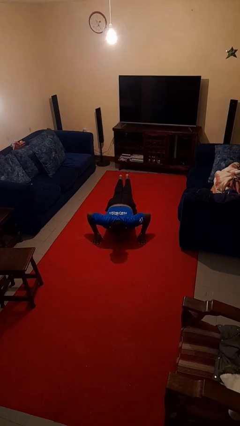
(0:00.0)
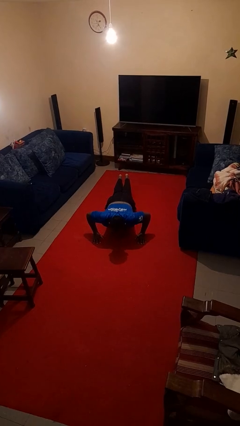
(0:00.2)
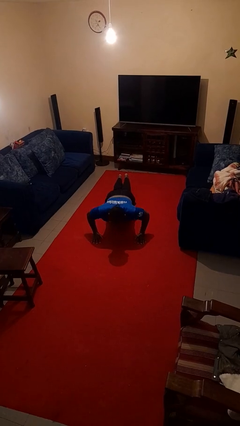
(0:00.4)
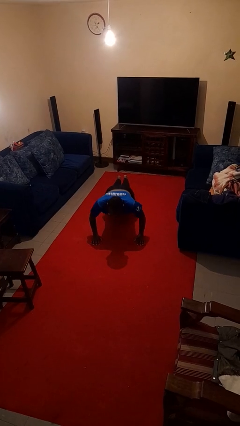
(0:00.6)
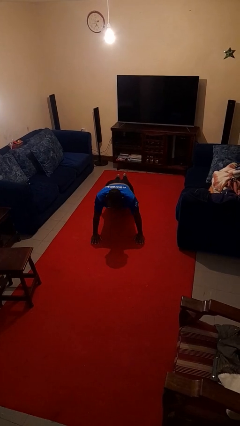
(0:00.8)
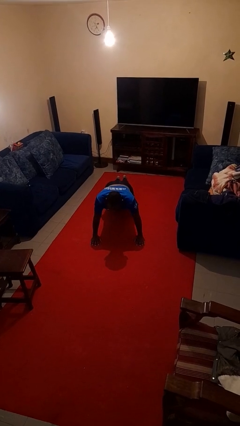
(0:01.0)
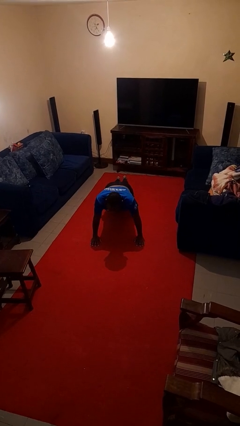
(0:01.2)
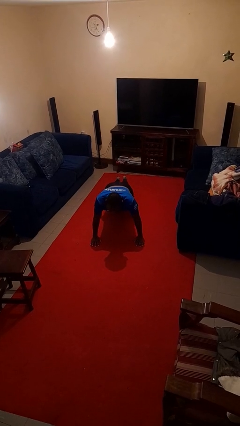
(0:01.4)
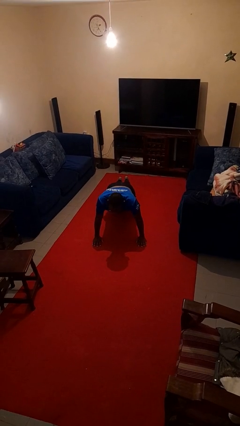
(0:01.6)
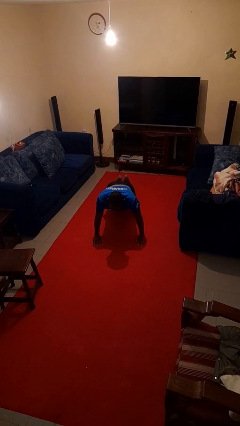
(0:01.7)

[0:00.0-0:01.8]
person exercises with pushup

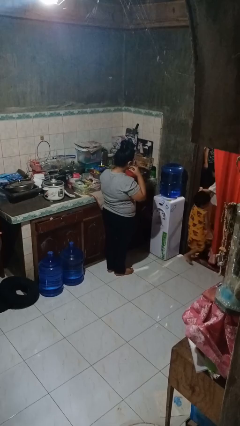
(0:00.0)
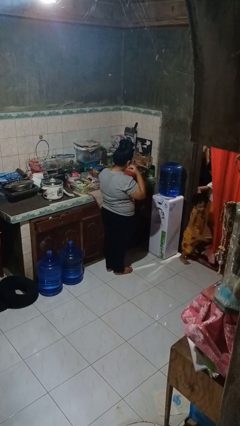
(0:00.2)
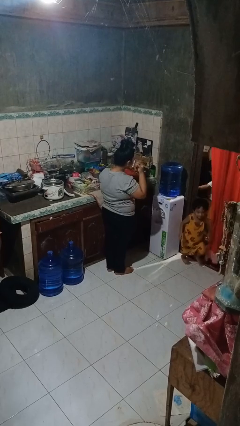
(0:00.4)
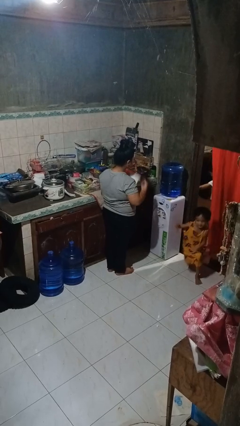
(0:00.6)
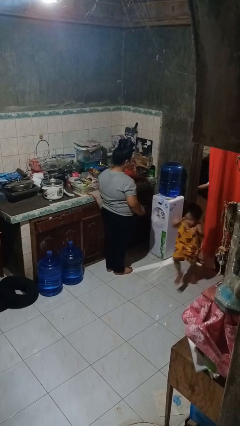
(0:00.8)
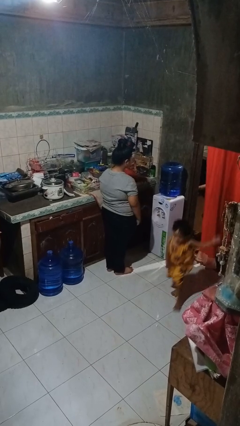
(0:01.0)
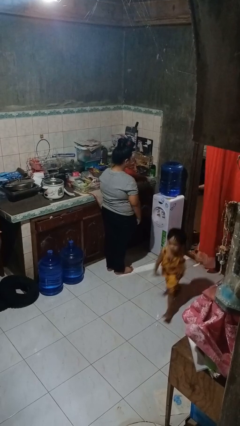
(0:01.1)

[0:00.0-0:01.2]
person takes off facemask

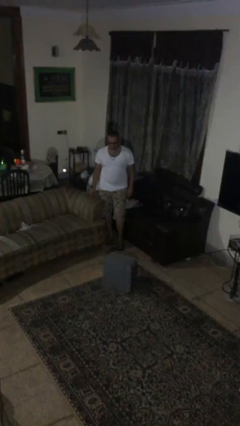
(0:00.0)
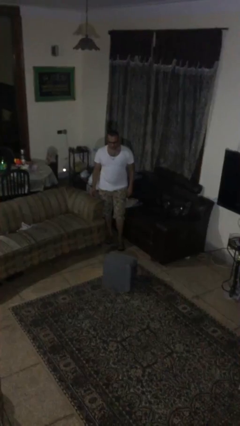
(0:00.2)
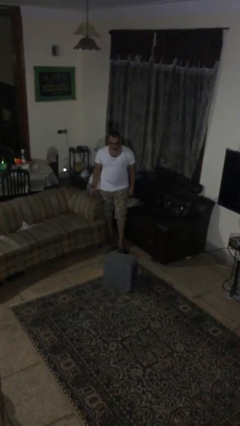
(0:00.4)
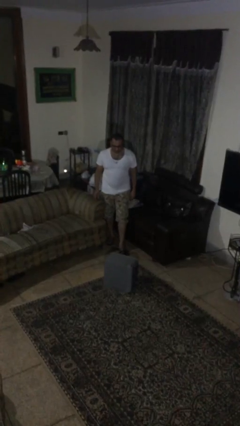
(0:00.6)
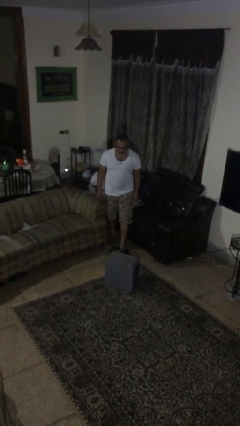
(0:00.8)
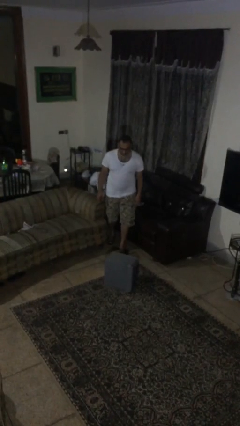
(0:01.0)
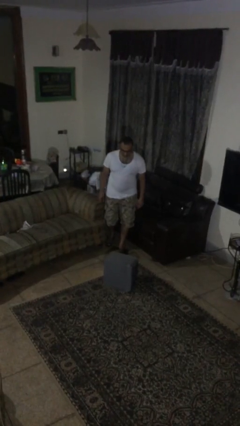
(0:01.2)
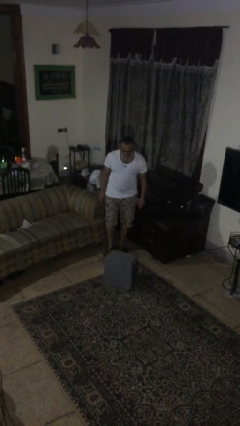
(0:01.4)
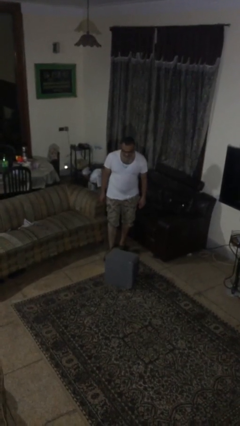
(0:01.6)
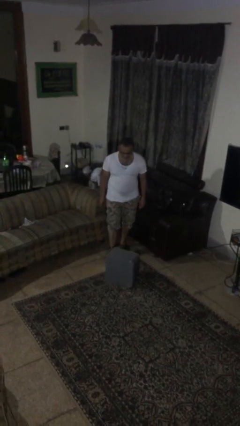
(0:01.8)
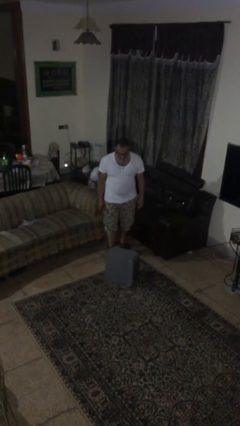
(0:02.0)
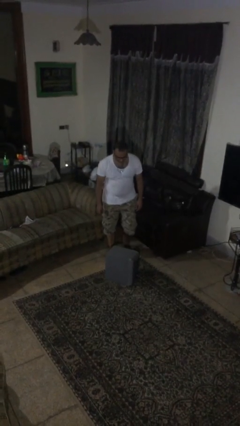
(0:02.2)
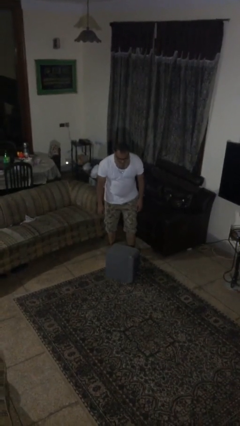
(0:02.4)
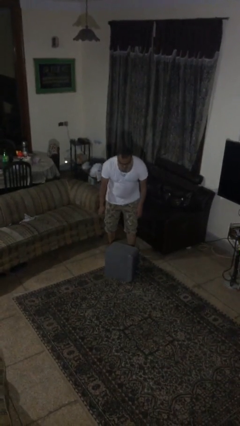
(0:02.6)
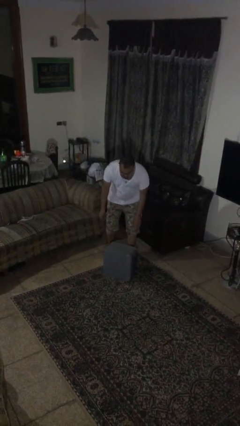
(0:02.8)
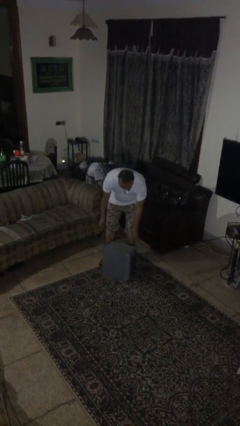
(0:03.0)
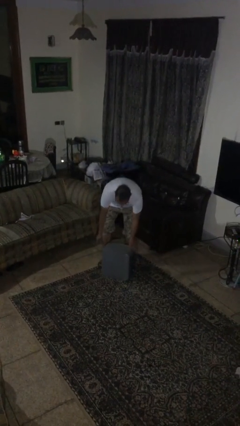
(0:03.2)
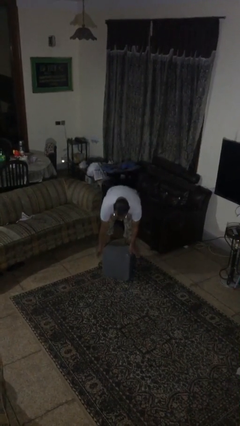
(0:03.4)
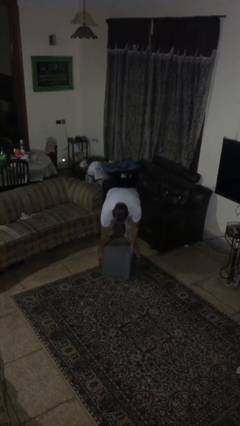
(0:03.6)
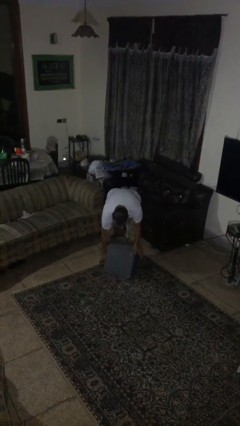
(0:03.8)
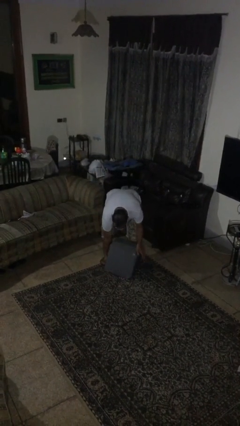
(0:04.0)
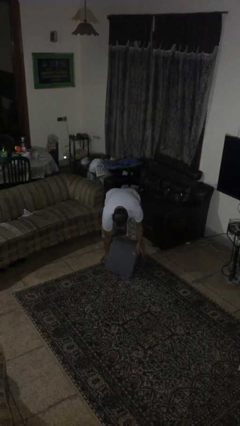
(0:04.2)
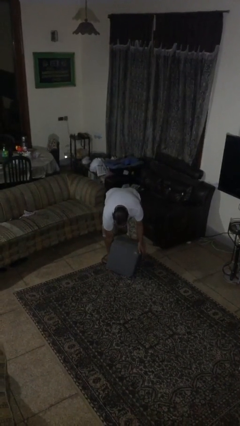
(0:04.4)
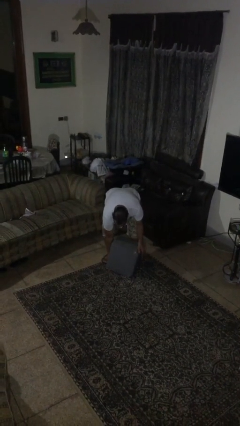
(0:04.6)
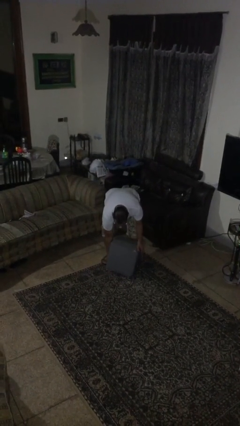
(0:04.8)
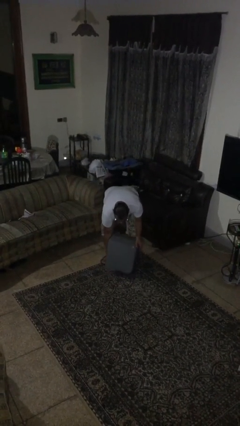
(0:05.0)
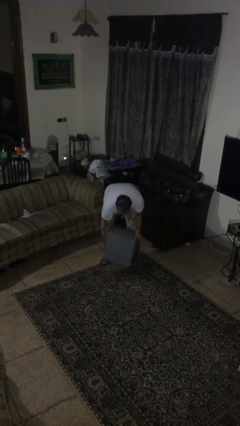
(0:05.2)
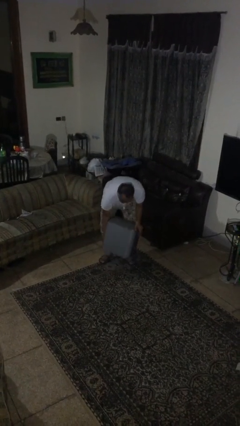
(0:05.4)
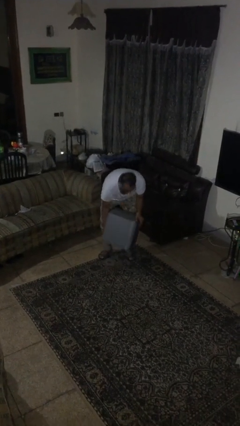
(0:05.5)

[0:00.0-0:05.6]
person picks up object from floor

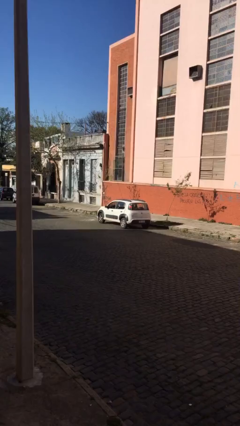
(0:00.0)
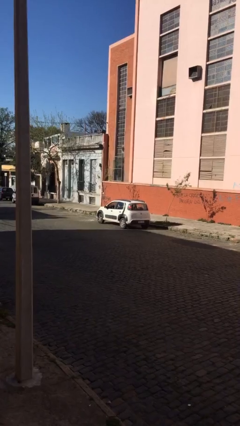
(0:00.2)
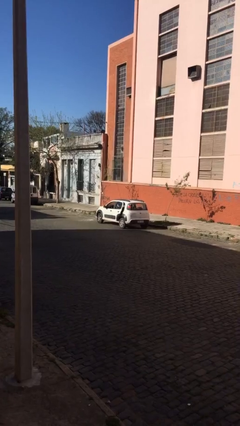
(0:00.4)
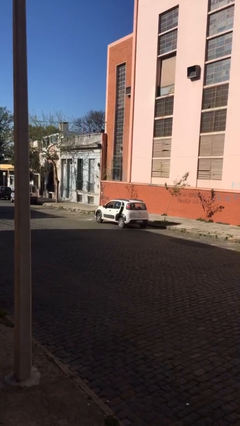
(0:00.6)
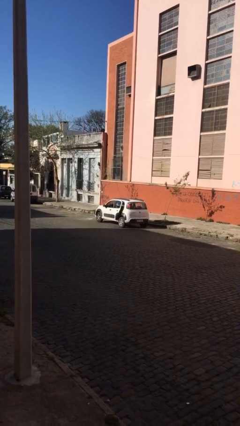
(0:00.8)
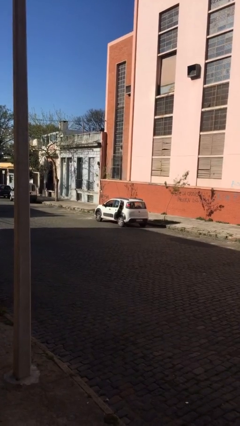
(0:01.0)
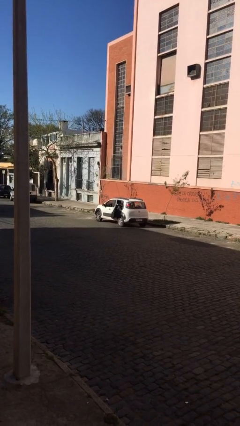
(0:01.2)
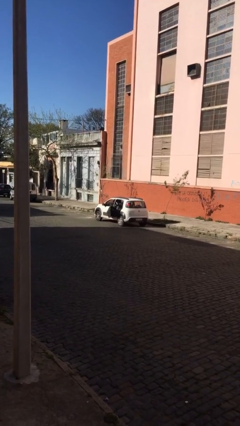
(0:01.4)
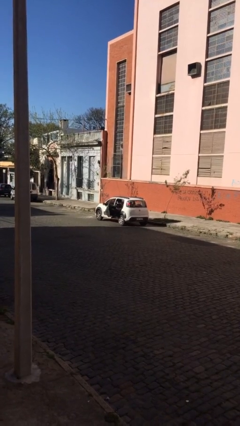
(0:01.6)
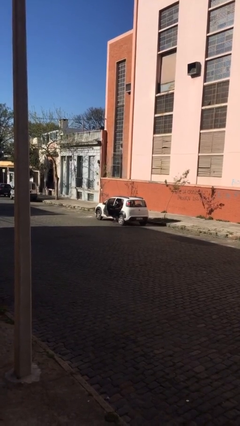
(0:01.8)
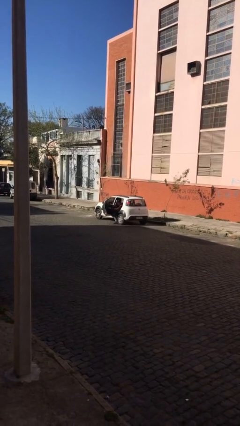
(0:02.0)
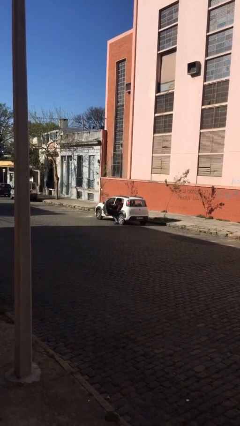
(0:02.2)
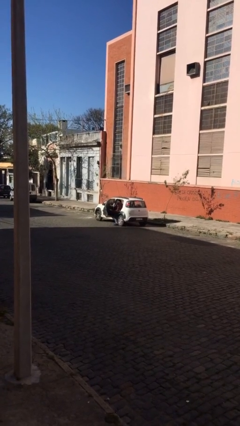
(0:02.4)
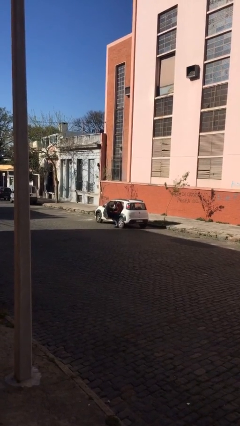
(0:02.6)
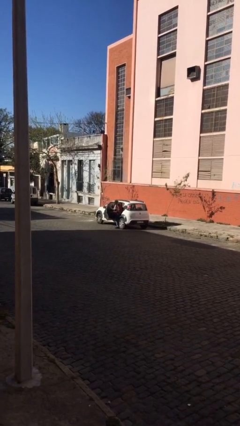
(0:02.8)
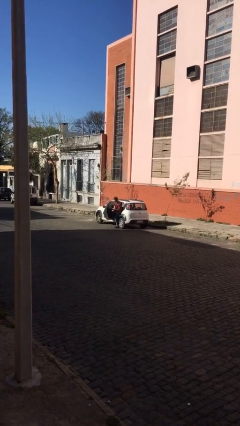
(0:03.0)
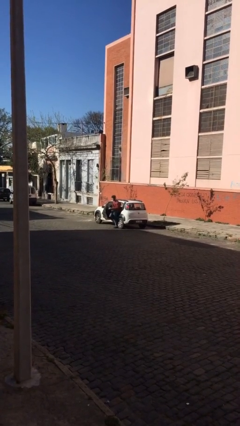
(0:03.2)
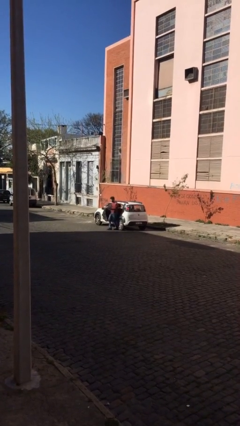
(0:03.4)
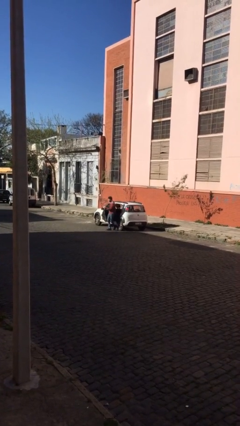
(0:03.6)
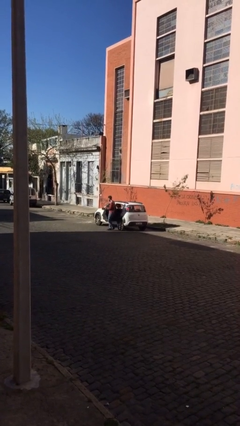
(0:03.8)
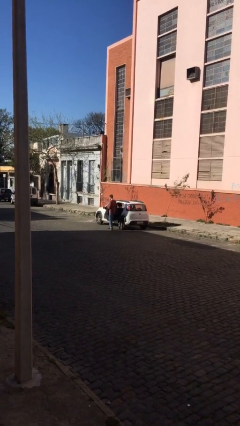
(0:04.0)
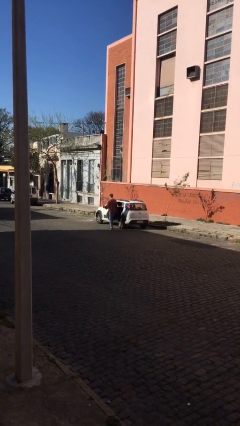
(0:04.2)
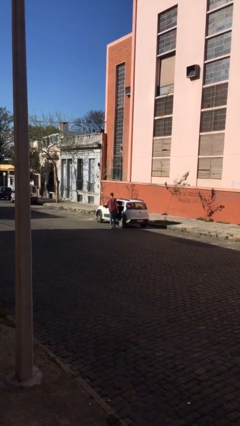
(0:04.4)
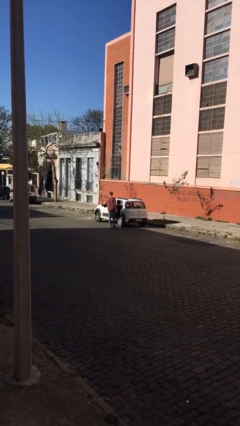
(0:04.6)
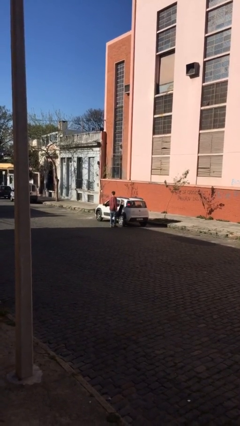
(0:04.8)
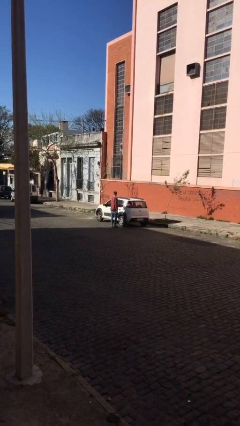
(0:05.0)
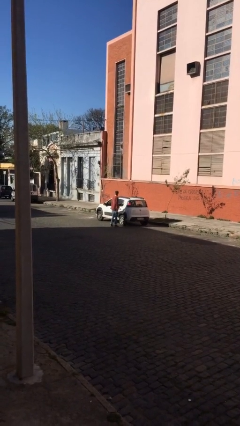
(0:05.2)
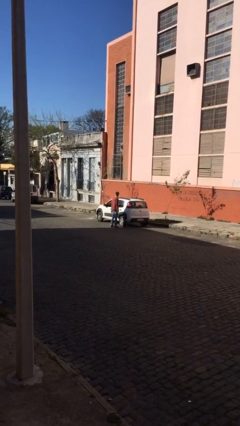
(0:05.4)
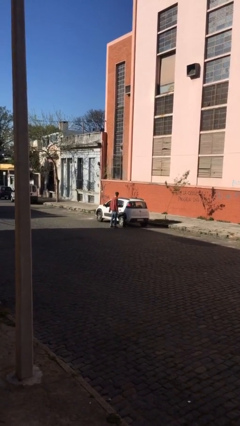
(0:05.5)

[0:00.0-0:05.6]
car drops off person

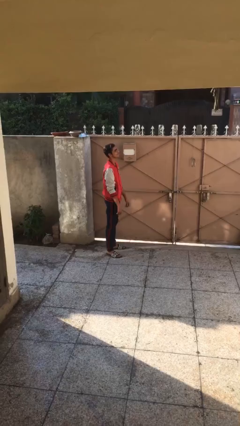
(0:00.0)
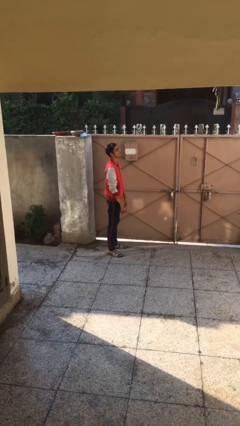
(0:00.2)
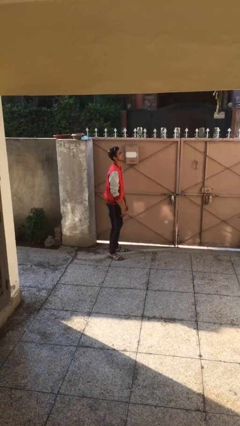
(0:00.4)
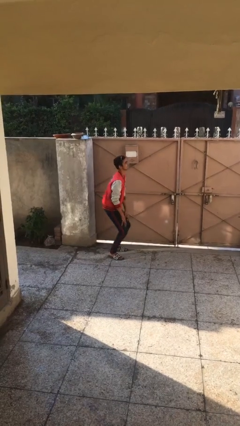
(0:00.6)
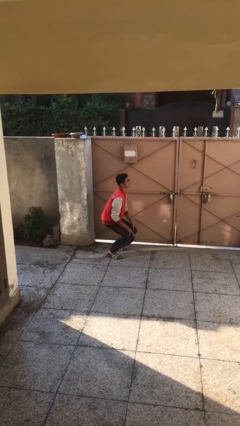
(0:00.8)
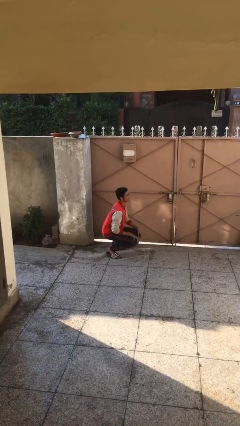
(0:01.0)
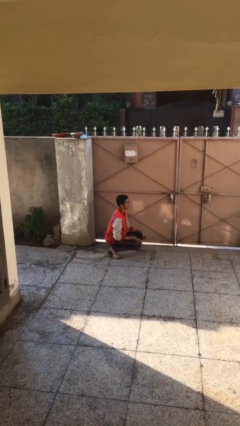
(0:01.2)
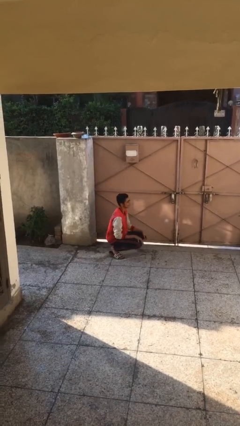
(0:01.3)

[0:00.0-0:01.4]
person sits down

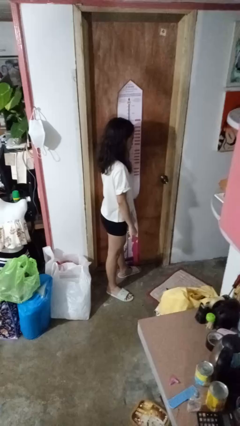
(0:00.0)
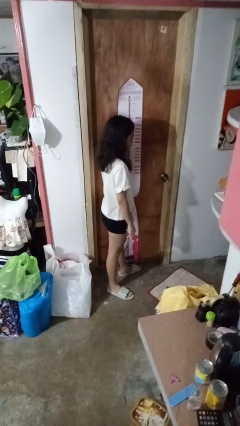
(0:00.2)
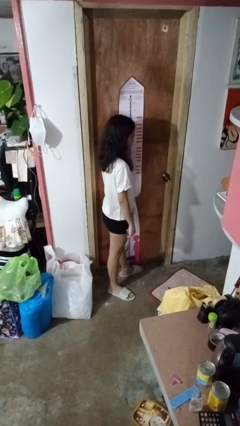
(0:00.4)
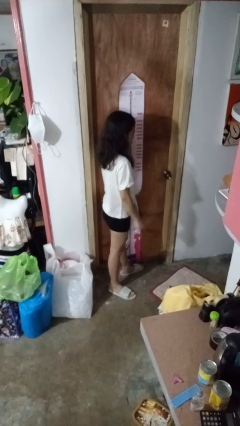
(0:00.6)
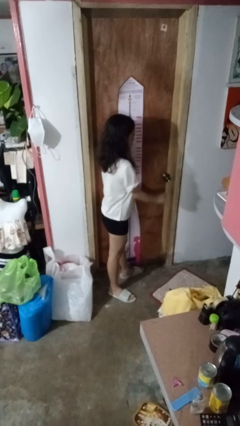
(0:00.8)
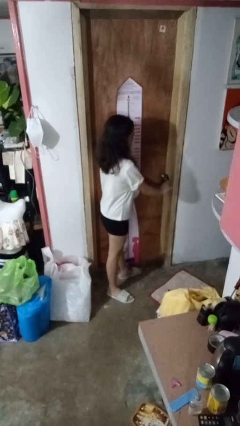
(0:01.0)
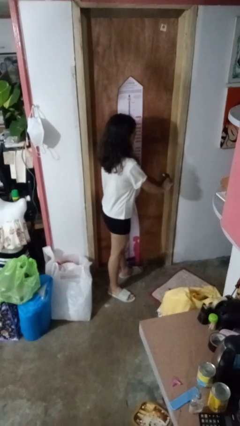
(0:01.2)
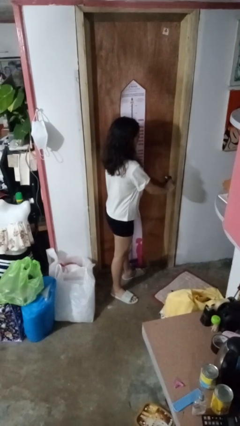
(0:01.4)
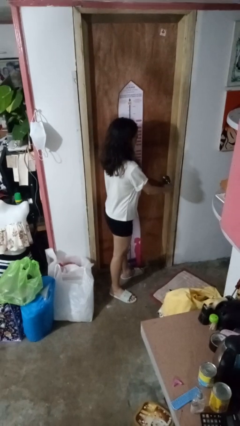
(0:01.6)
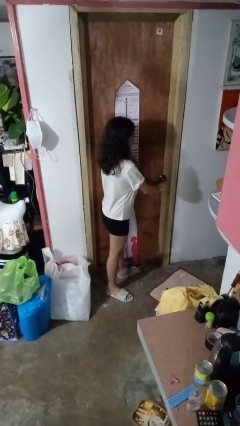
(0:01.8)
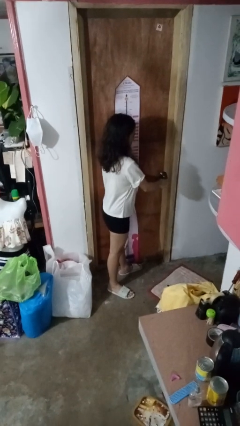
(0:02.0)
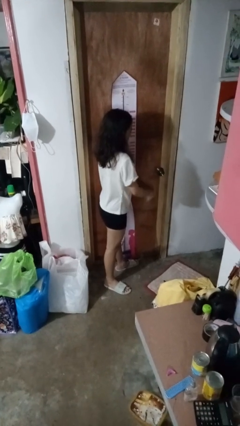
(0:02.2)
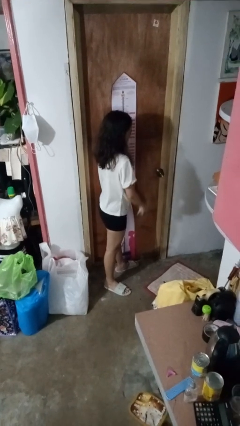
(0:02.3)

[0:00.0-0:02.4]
person unlocks door with keys
